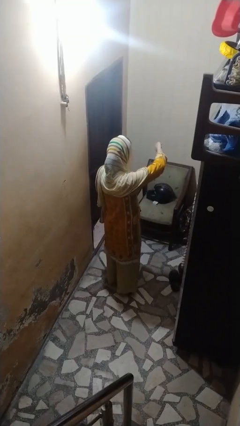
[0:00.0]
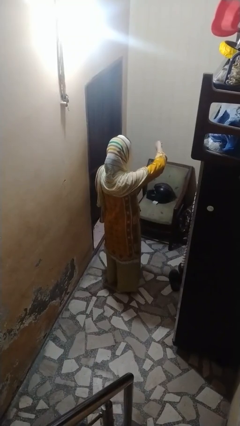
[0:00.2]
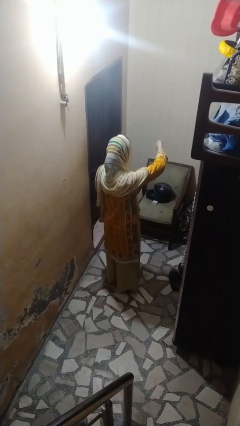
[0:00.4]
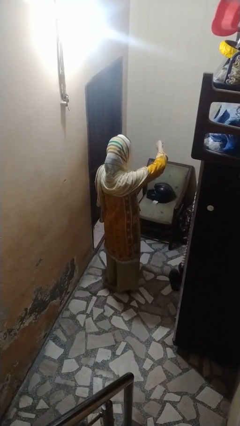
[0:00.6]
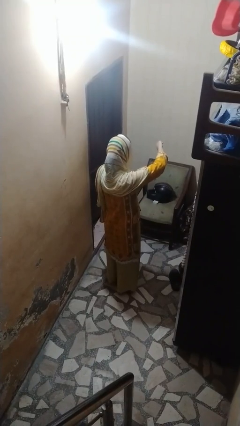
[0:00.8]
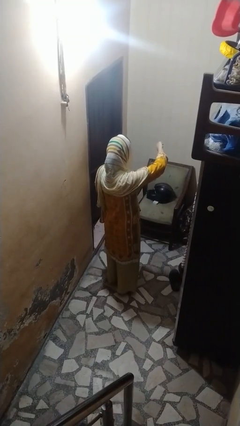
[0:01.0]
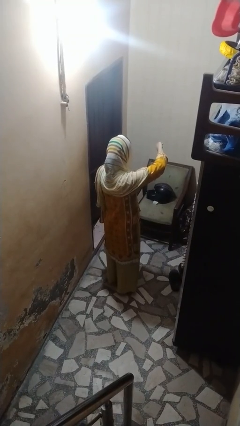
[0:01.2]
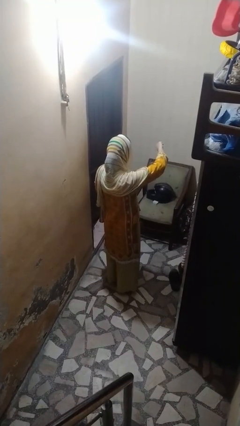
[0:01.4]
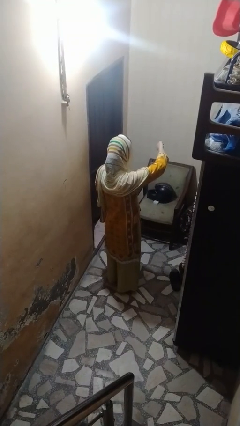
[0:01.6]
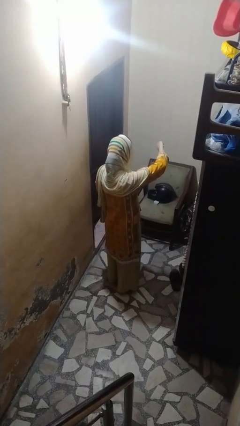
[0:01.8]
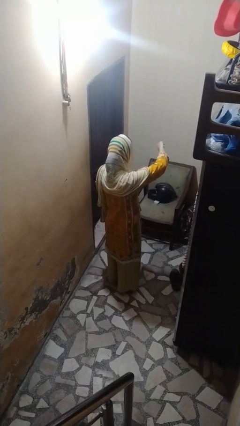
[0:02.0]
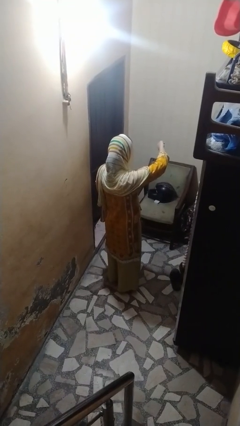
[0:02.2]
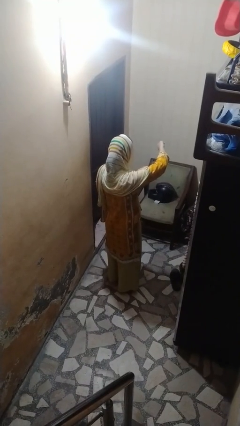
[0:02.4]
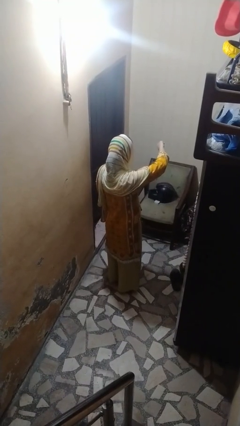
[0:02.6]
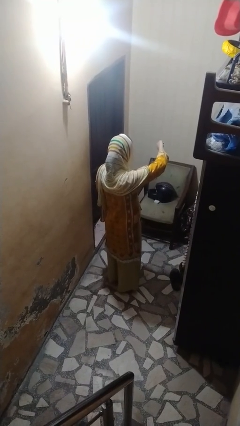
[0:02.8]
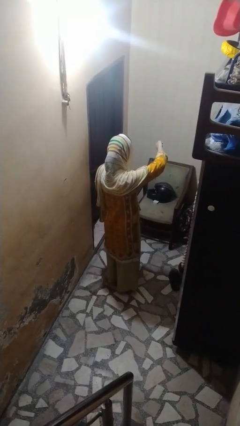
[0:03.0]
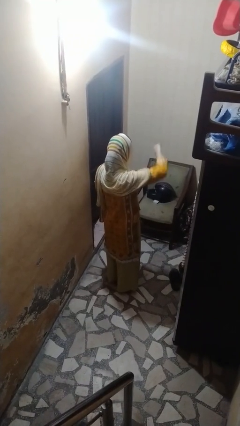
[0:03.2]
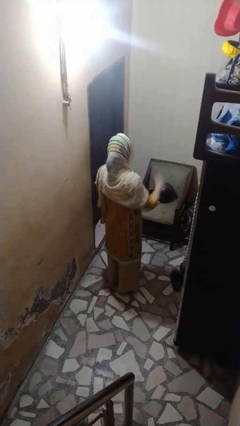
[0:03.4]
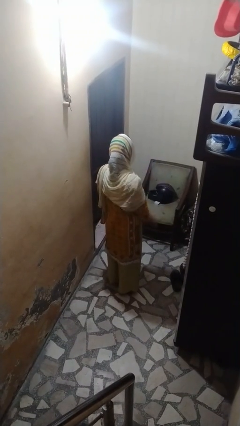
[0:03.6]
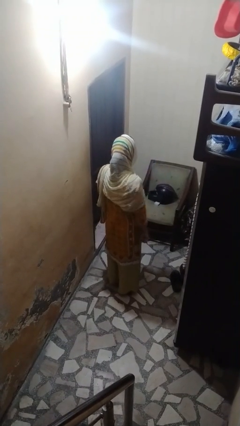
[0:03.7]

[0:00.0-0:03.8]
person gestures thumbs down

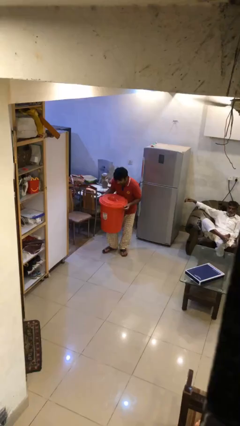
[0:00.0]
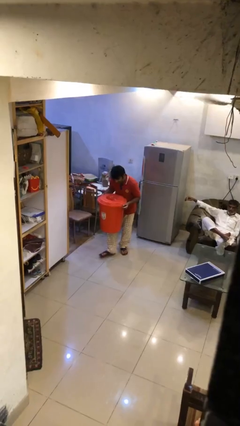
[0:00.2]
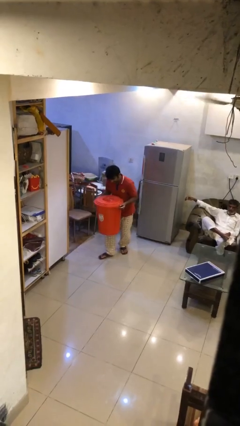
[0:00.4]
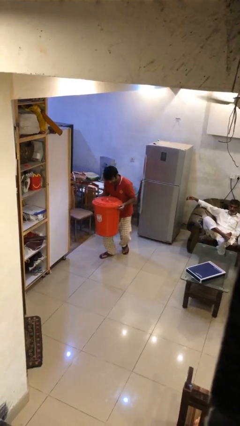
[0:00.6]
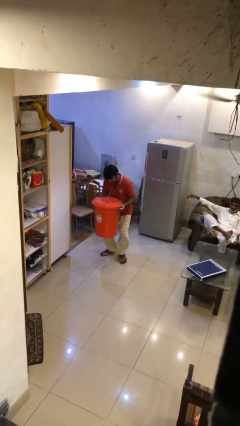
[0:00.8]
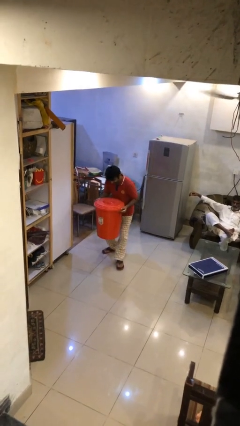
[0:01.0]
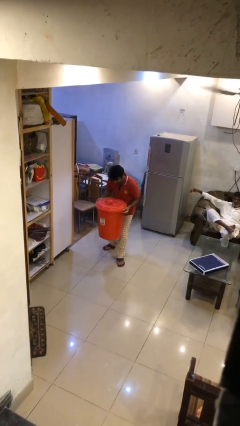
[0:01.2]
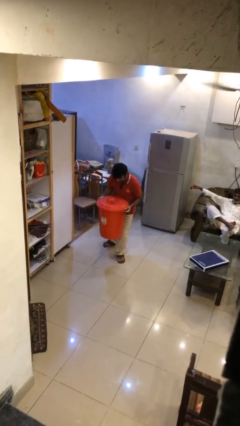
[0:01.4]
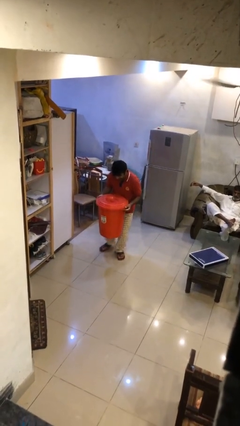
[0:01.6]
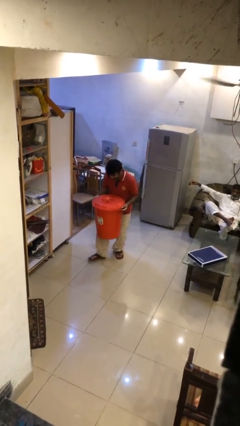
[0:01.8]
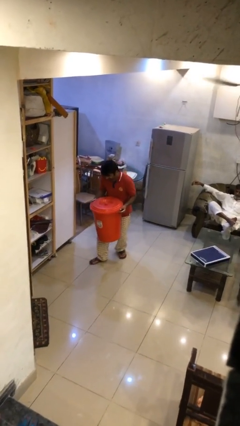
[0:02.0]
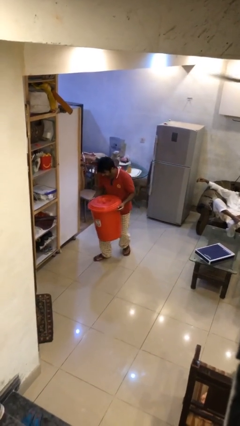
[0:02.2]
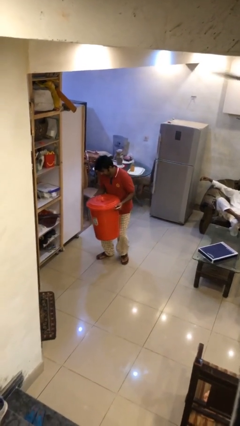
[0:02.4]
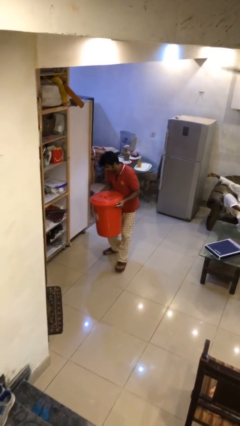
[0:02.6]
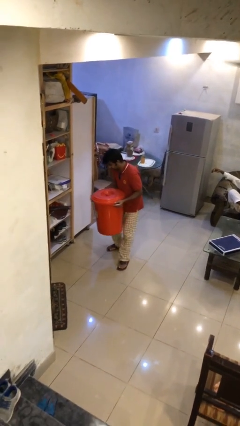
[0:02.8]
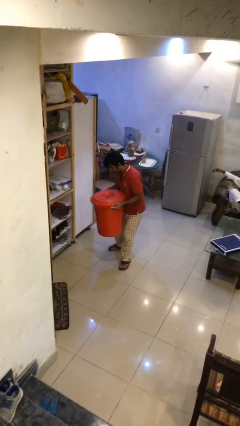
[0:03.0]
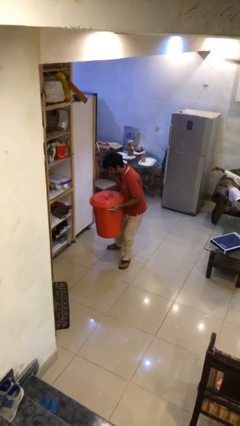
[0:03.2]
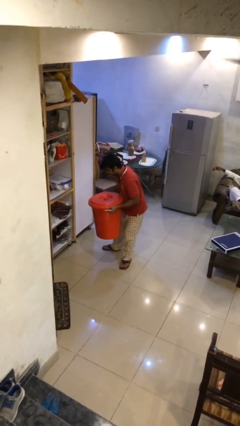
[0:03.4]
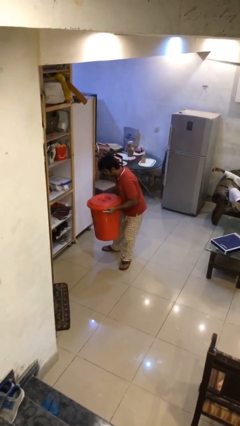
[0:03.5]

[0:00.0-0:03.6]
person carries heavy object

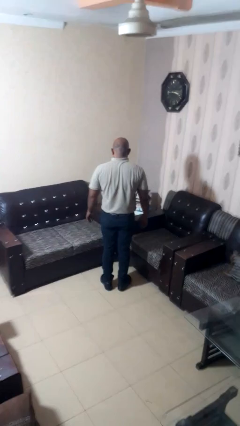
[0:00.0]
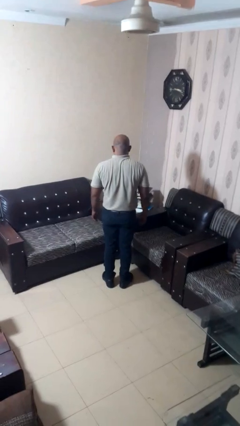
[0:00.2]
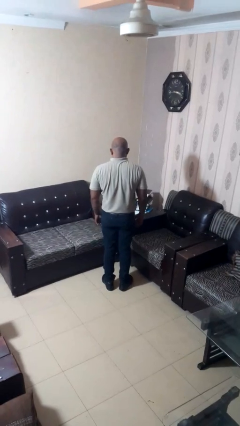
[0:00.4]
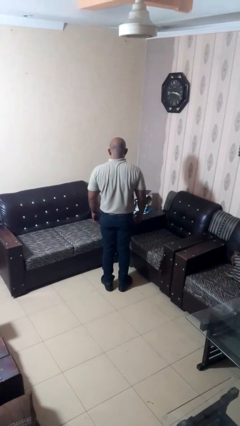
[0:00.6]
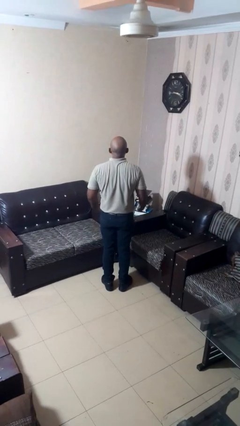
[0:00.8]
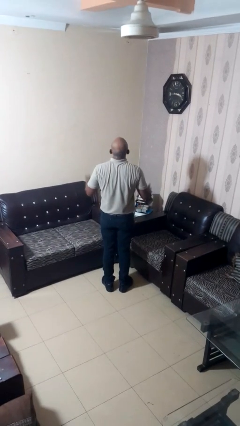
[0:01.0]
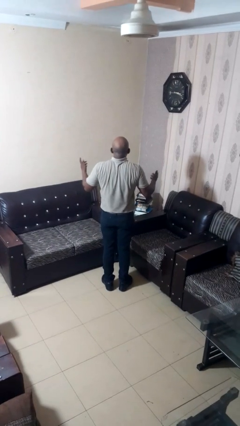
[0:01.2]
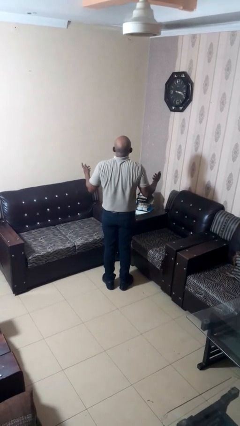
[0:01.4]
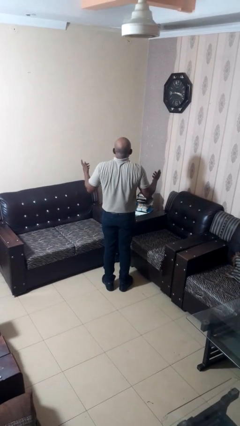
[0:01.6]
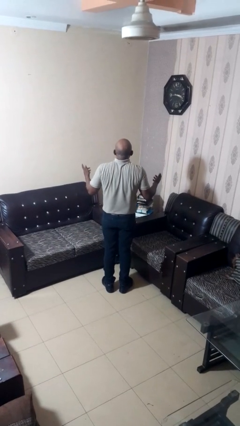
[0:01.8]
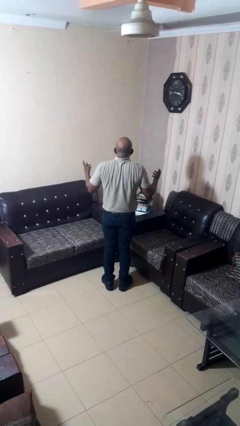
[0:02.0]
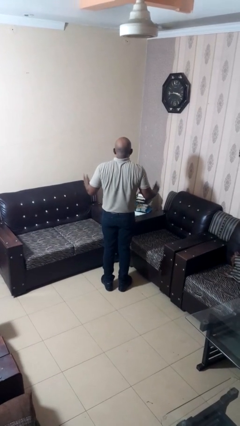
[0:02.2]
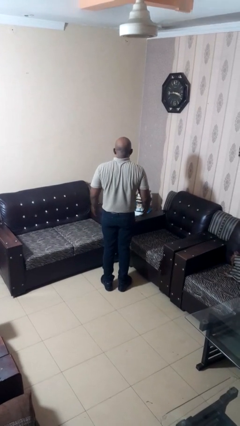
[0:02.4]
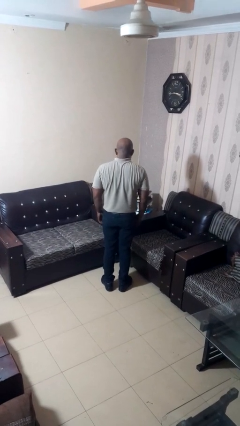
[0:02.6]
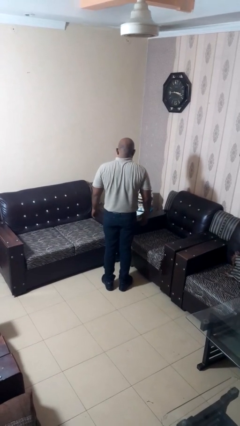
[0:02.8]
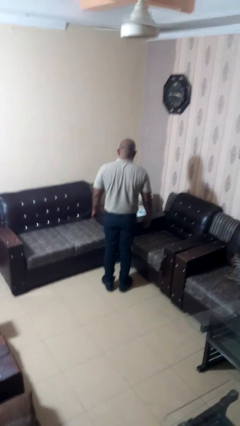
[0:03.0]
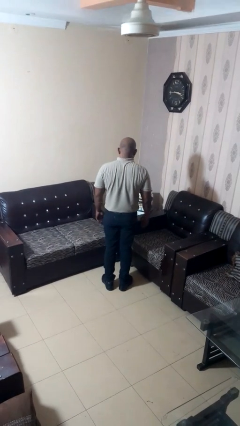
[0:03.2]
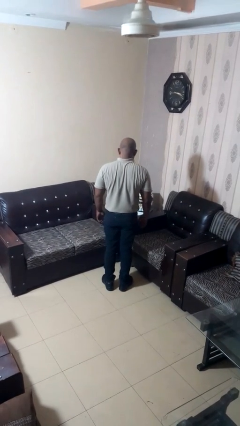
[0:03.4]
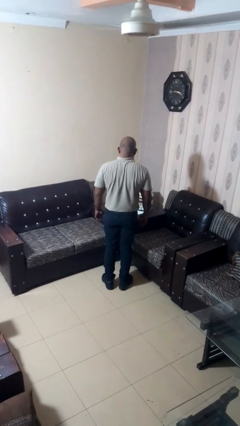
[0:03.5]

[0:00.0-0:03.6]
person shrugs

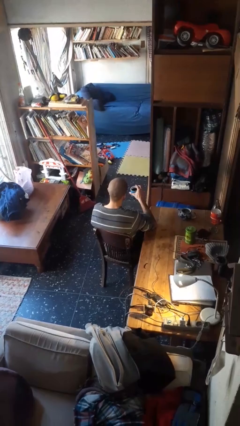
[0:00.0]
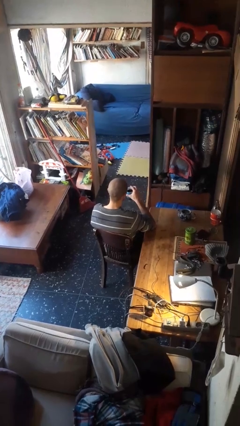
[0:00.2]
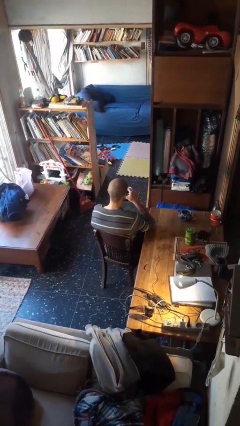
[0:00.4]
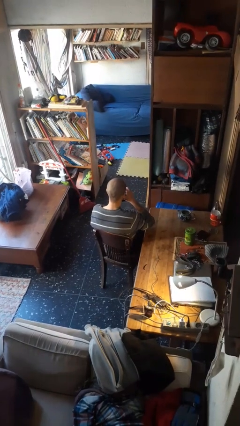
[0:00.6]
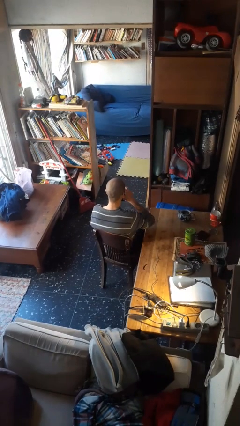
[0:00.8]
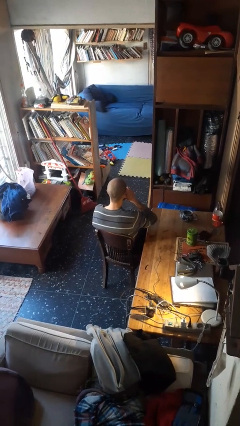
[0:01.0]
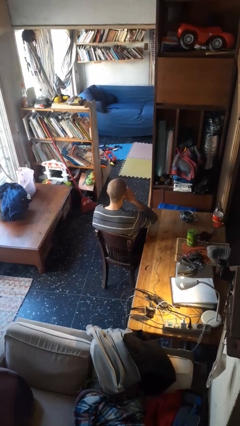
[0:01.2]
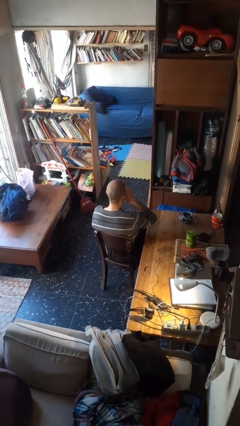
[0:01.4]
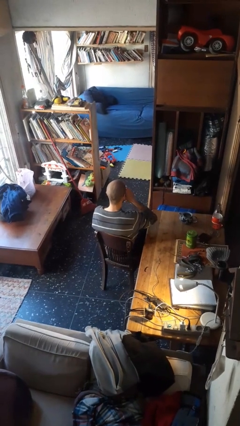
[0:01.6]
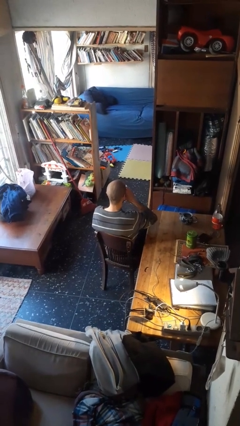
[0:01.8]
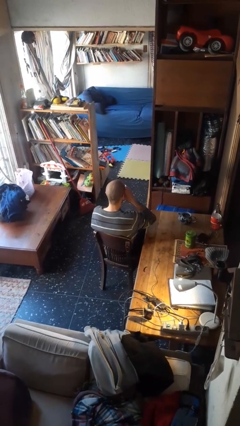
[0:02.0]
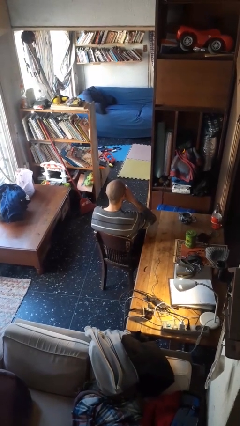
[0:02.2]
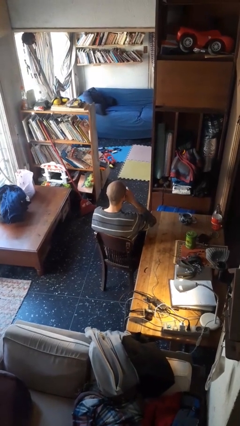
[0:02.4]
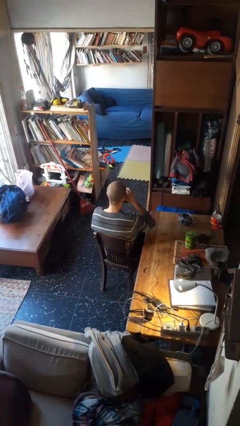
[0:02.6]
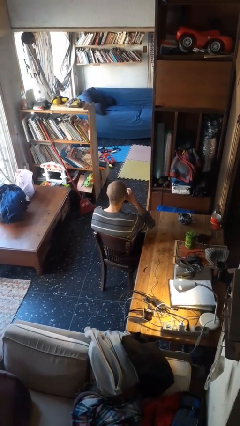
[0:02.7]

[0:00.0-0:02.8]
person drinks from mug

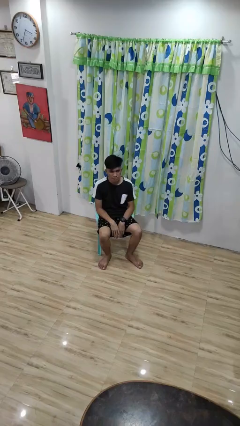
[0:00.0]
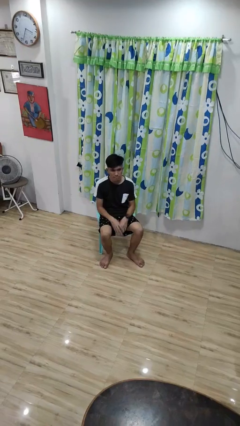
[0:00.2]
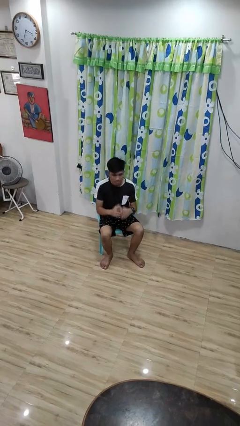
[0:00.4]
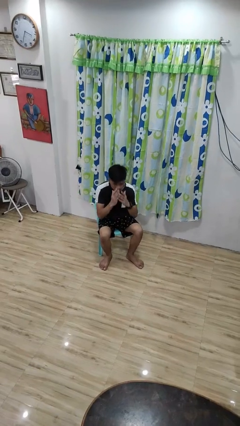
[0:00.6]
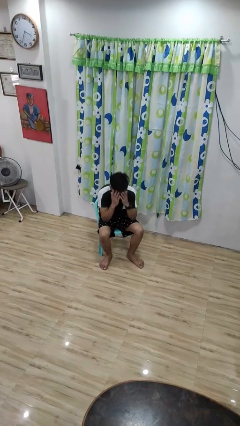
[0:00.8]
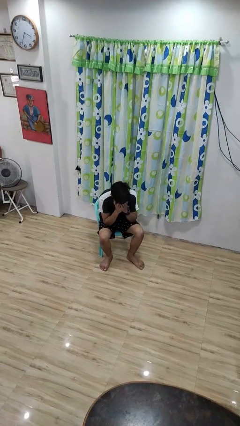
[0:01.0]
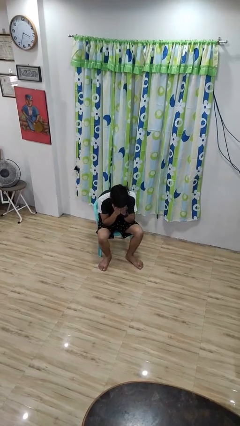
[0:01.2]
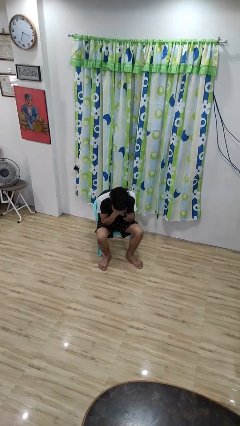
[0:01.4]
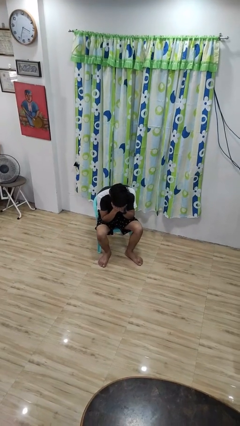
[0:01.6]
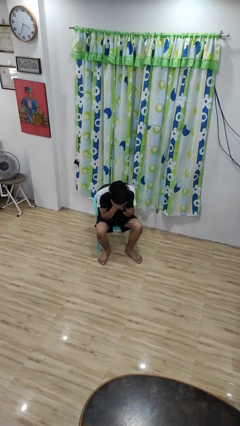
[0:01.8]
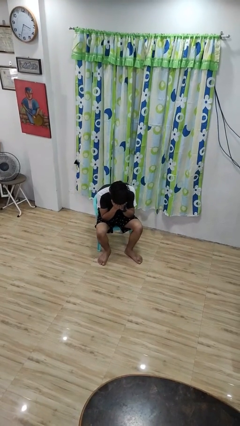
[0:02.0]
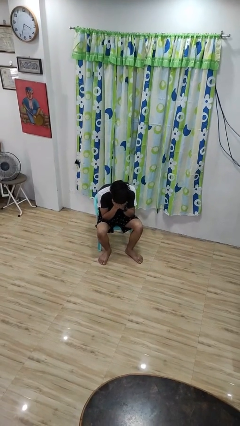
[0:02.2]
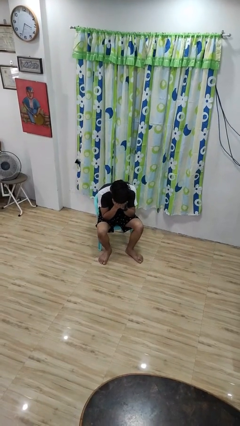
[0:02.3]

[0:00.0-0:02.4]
person covers face with hands

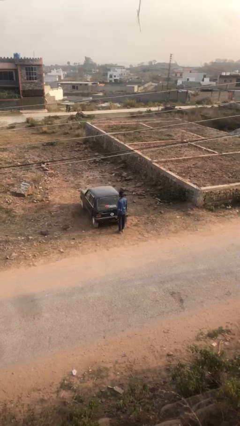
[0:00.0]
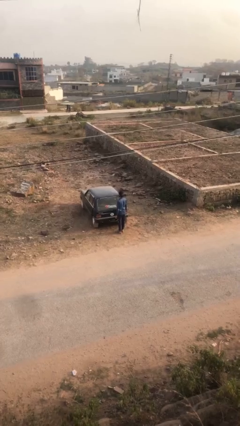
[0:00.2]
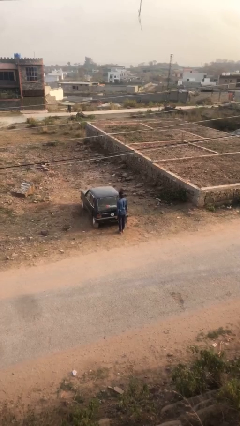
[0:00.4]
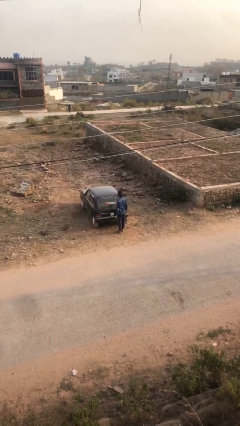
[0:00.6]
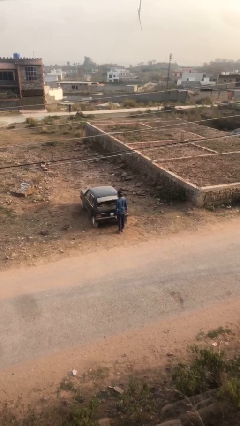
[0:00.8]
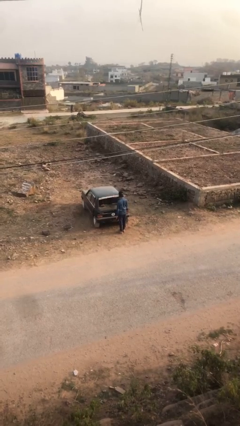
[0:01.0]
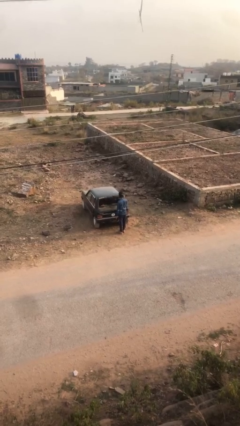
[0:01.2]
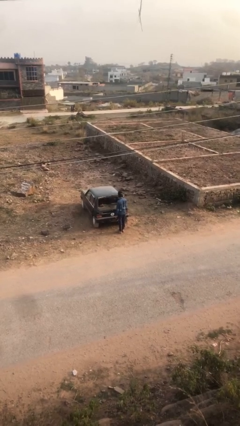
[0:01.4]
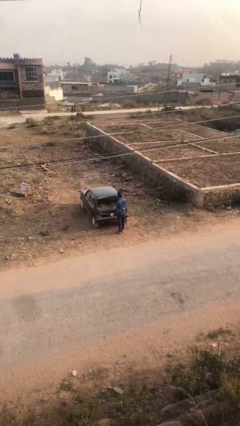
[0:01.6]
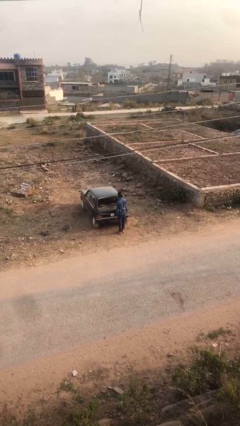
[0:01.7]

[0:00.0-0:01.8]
person opens car trunk
